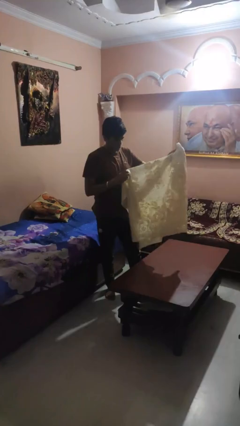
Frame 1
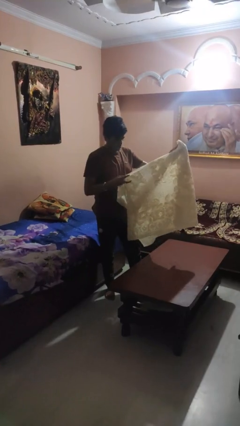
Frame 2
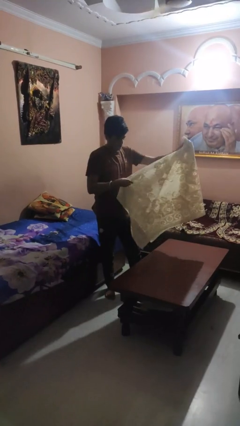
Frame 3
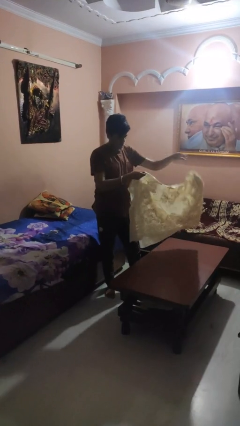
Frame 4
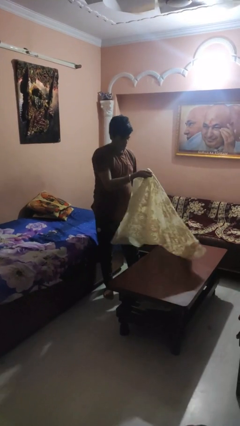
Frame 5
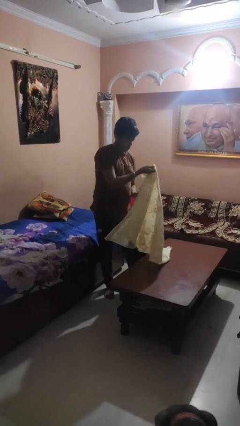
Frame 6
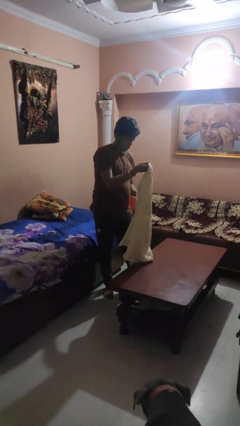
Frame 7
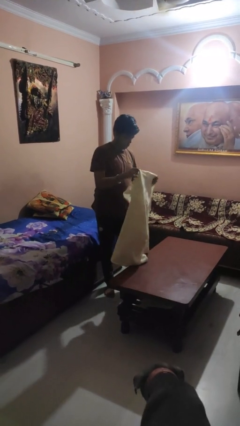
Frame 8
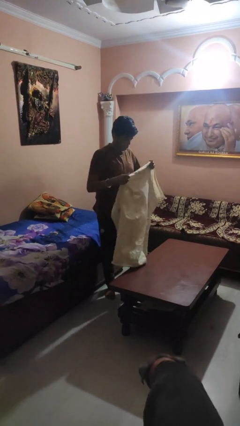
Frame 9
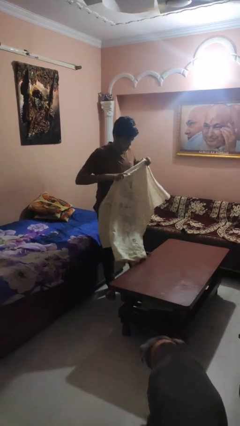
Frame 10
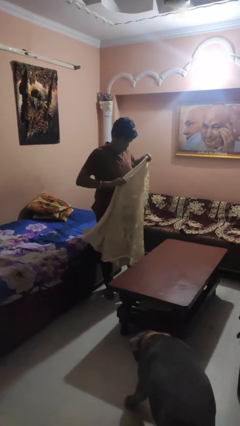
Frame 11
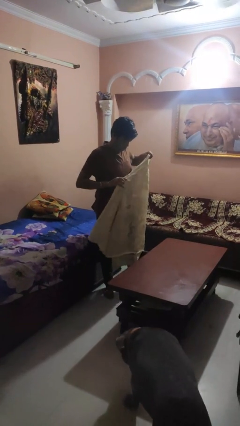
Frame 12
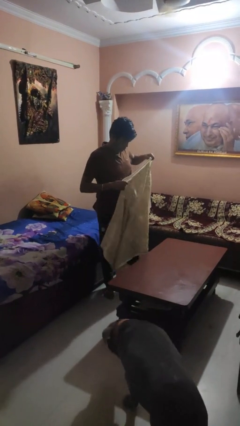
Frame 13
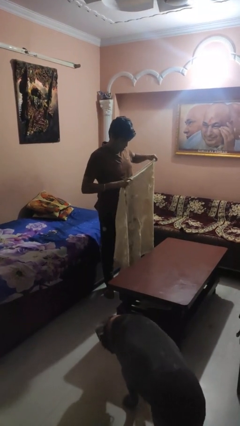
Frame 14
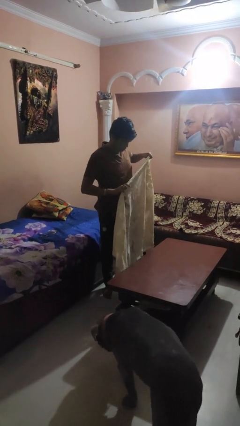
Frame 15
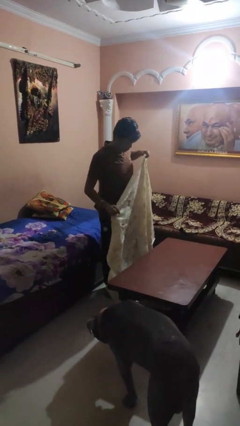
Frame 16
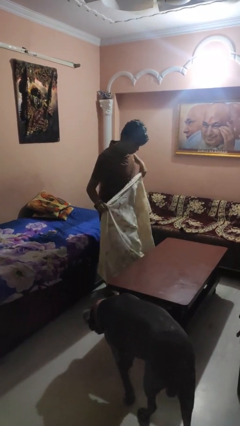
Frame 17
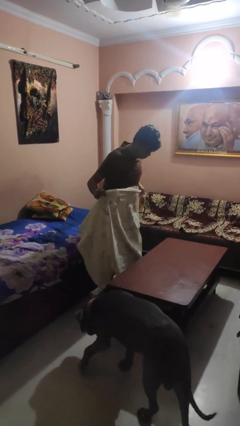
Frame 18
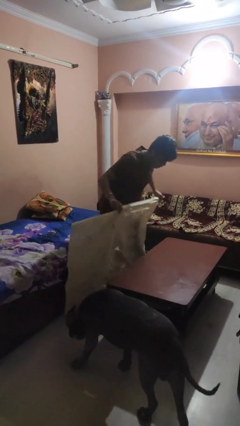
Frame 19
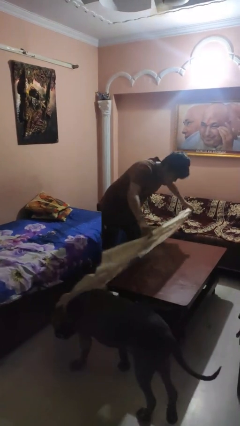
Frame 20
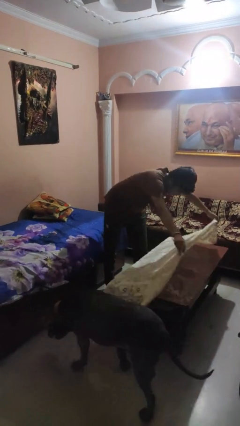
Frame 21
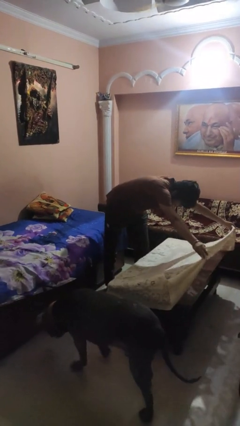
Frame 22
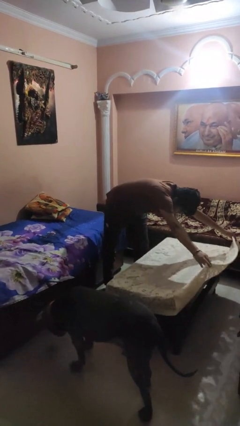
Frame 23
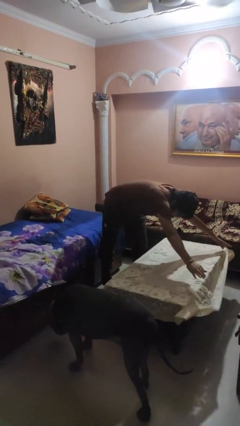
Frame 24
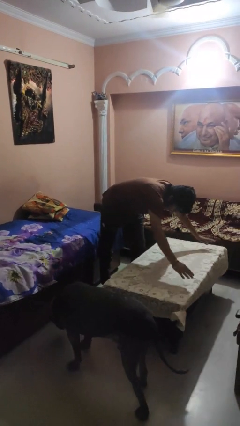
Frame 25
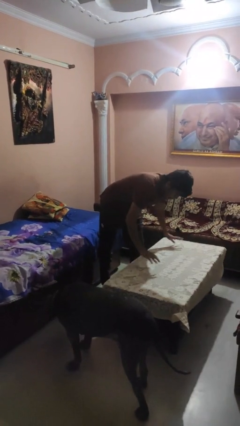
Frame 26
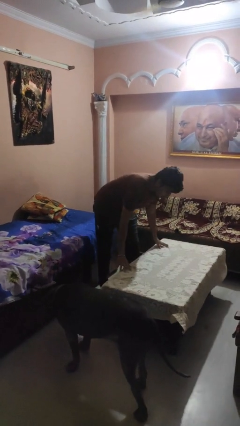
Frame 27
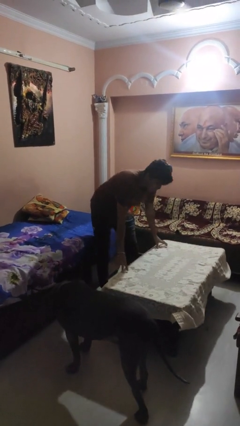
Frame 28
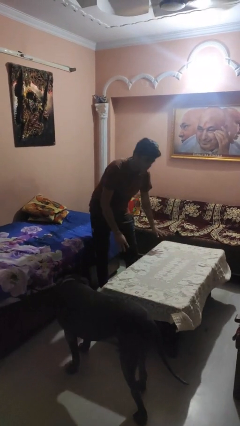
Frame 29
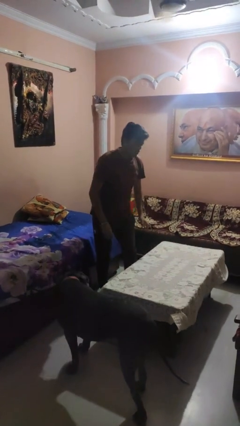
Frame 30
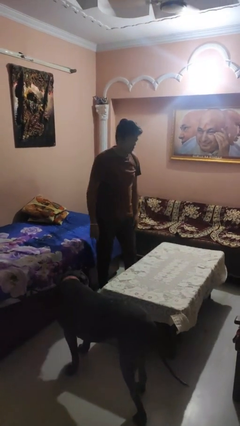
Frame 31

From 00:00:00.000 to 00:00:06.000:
person spreads tablecloth

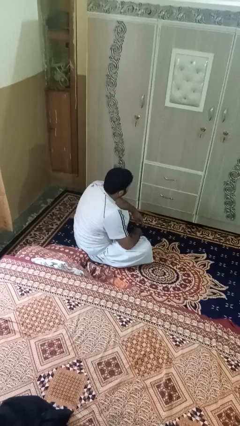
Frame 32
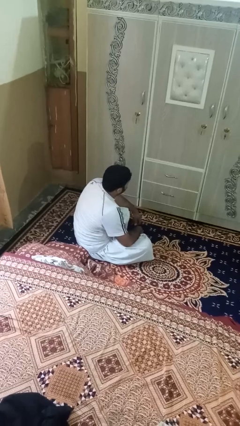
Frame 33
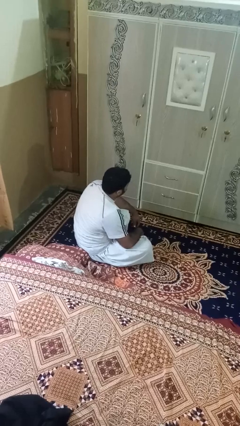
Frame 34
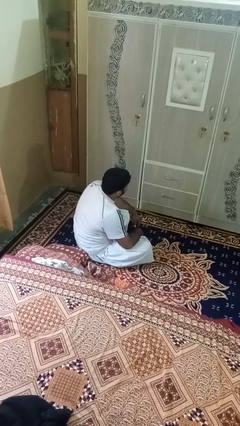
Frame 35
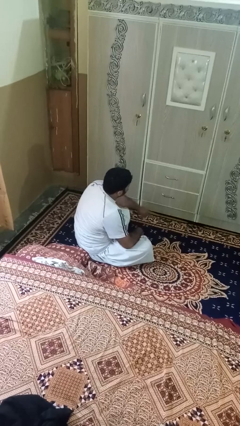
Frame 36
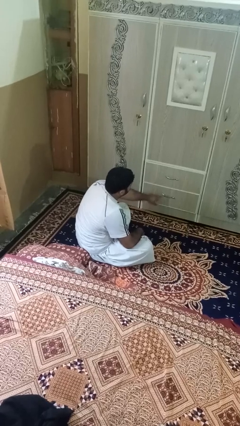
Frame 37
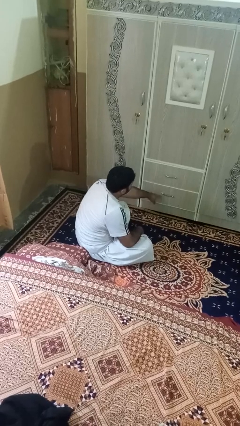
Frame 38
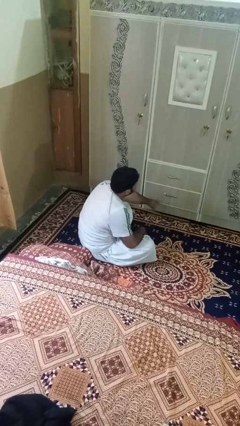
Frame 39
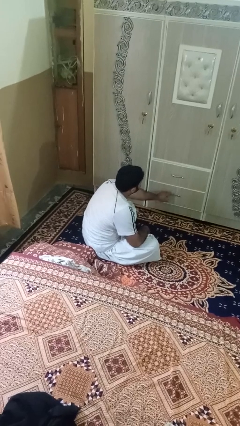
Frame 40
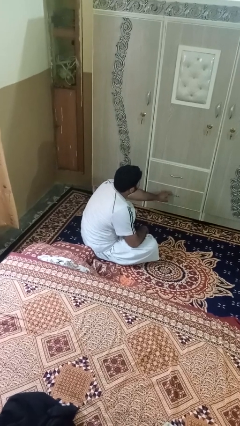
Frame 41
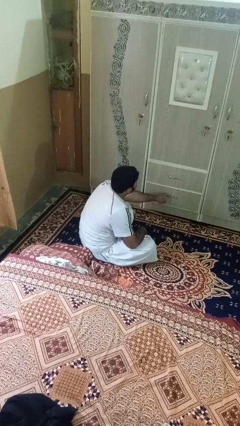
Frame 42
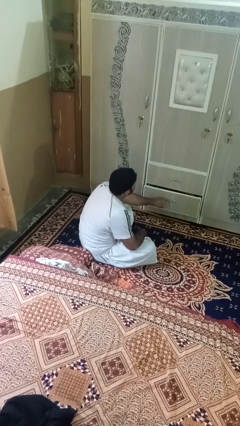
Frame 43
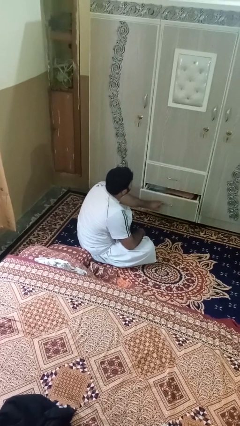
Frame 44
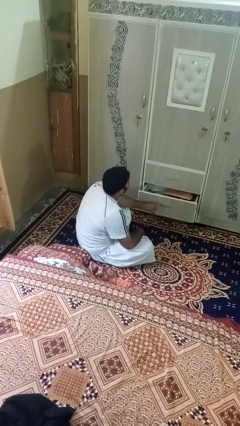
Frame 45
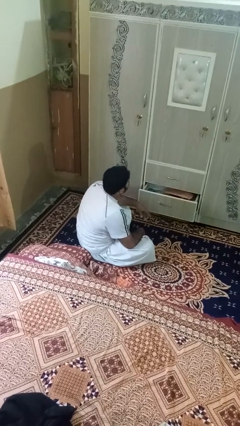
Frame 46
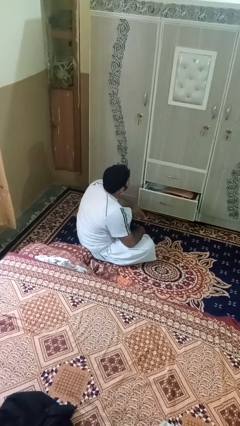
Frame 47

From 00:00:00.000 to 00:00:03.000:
person opens dresser drawer

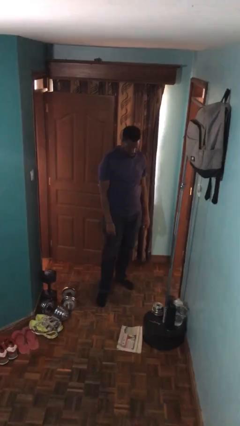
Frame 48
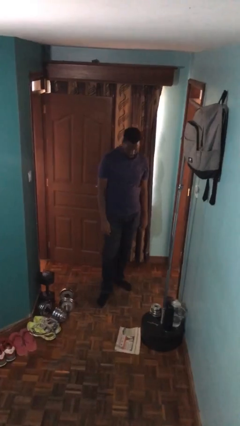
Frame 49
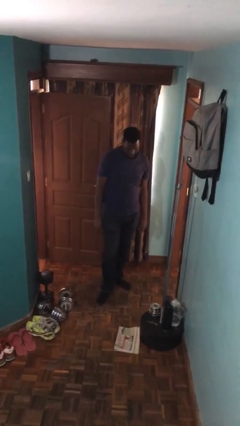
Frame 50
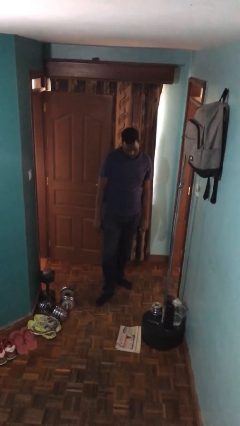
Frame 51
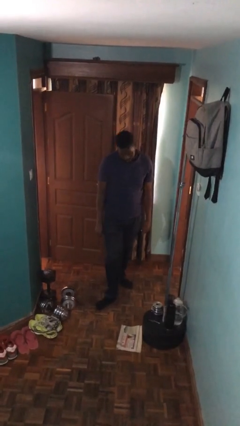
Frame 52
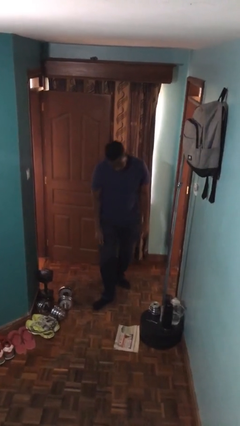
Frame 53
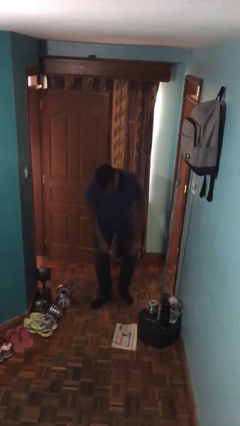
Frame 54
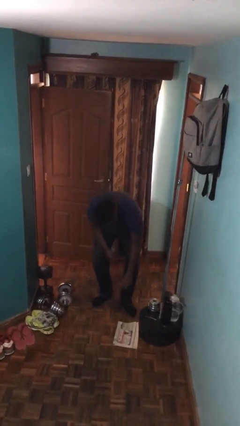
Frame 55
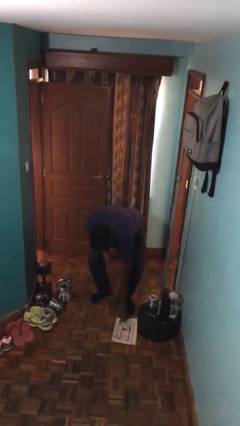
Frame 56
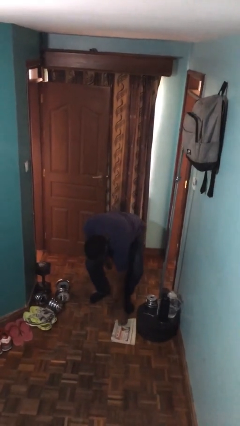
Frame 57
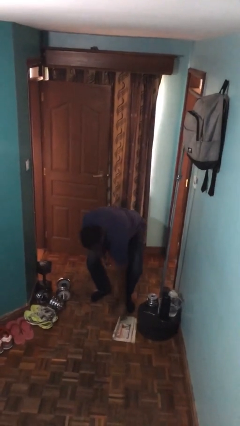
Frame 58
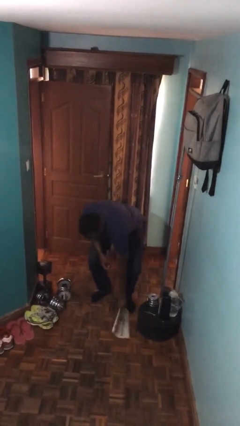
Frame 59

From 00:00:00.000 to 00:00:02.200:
person picks up object from floor

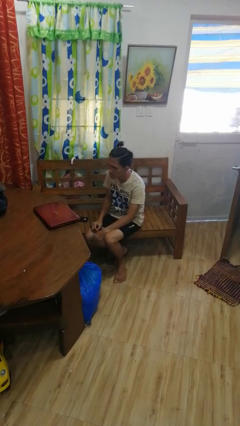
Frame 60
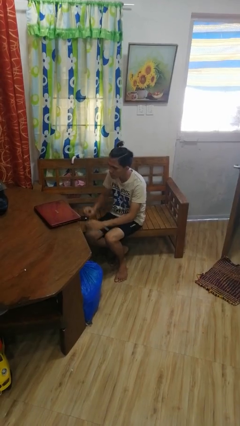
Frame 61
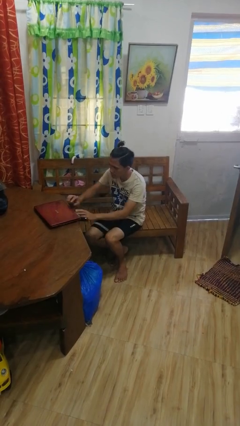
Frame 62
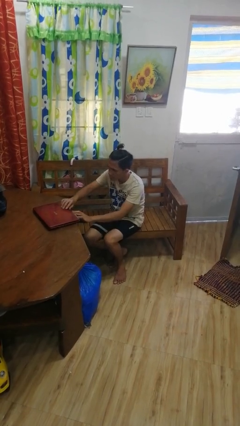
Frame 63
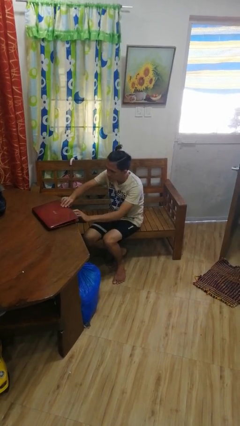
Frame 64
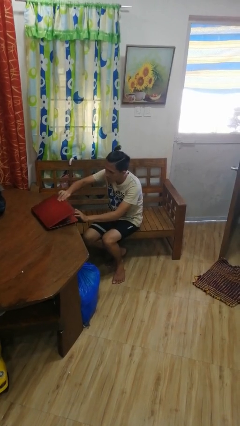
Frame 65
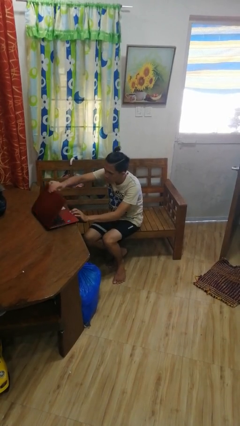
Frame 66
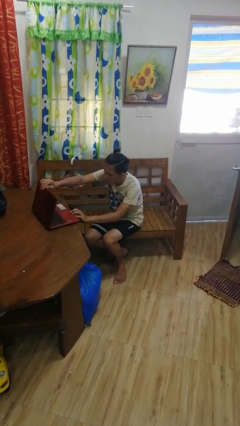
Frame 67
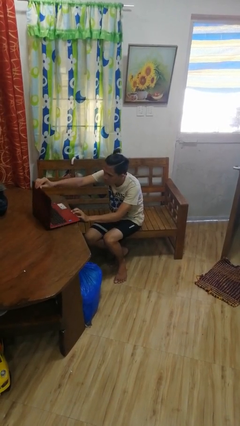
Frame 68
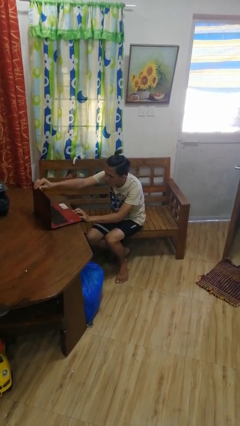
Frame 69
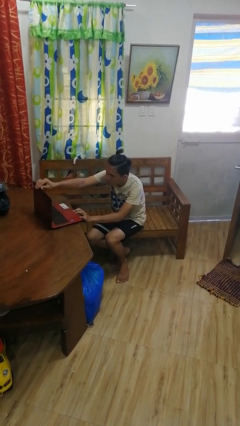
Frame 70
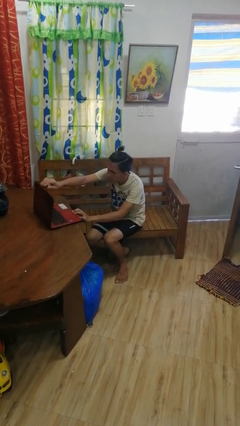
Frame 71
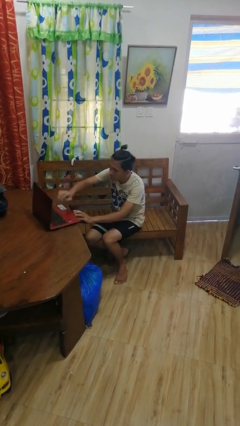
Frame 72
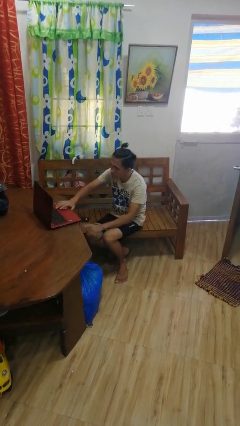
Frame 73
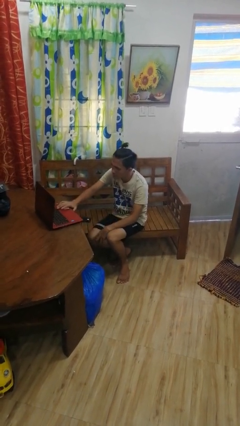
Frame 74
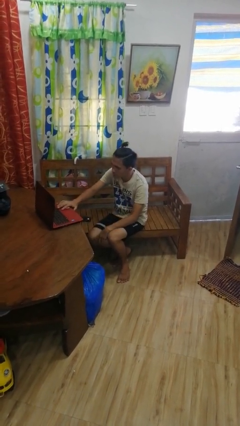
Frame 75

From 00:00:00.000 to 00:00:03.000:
person opens laptop

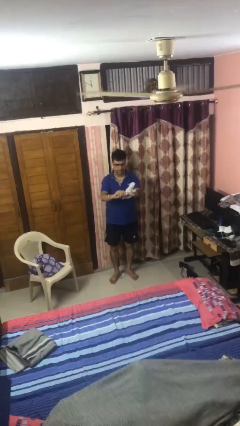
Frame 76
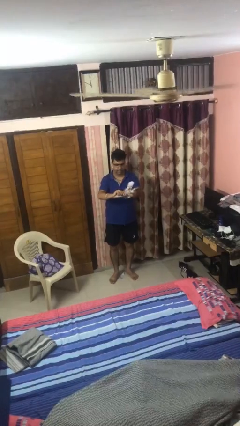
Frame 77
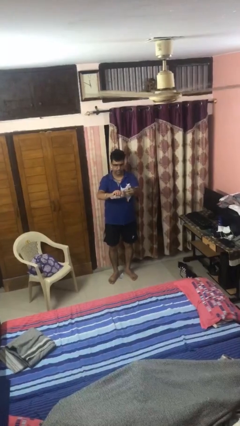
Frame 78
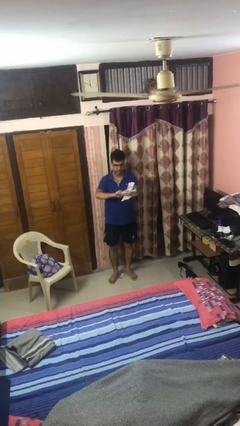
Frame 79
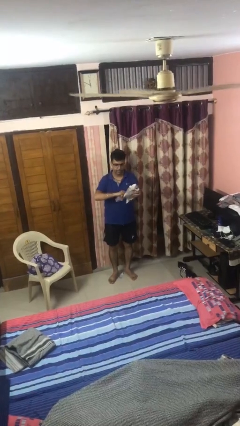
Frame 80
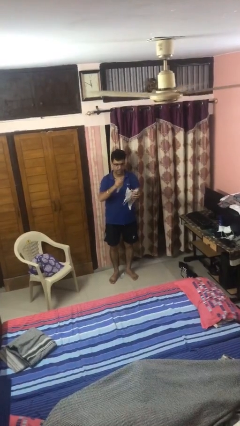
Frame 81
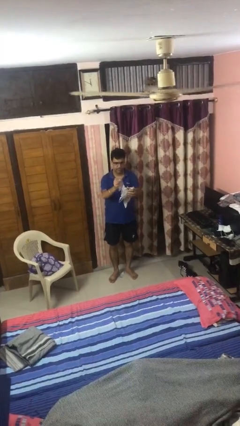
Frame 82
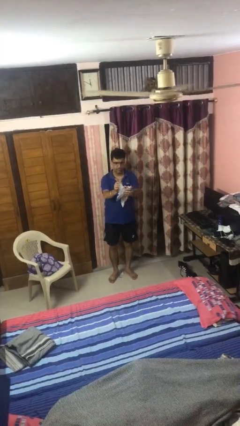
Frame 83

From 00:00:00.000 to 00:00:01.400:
person tears paper

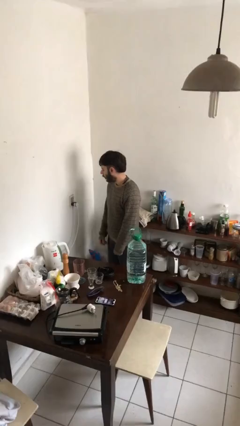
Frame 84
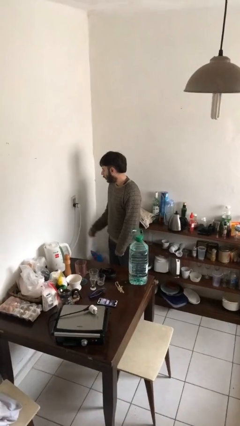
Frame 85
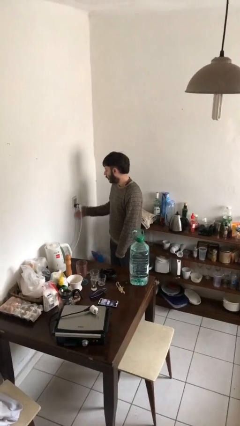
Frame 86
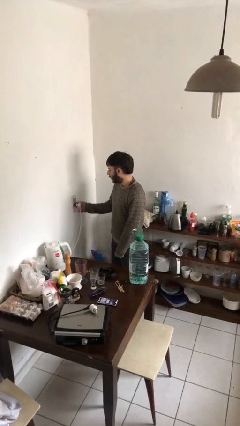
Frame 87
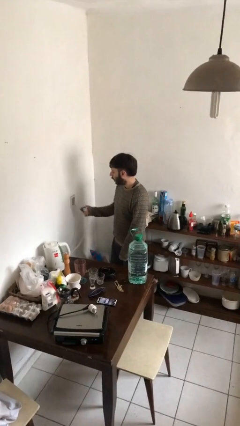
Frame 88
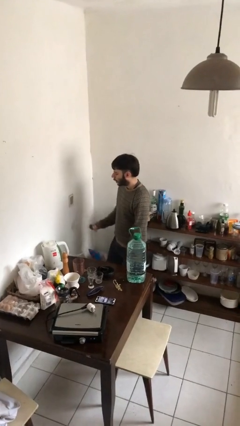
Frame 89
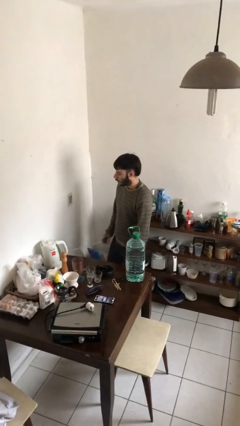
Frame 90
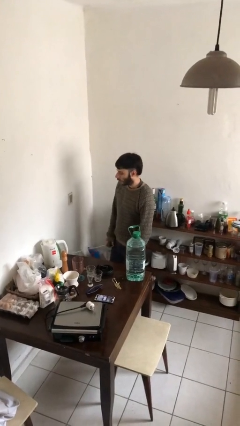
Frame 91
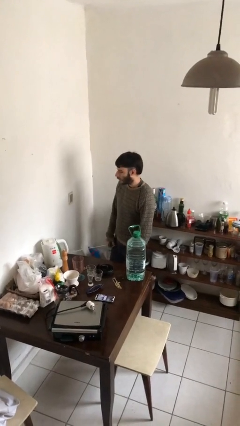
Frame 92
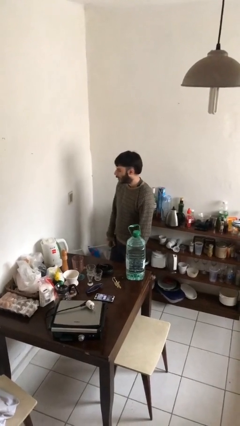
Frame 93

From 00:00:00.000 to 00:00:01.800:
person unplugs from electrical socket
